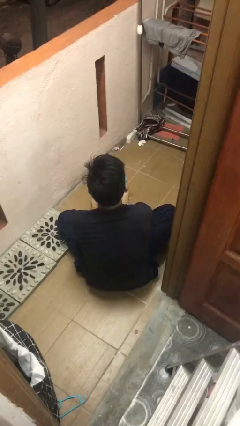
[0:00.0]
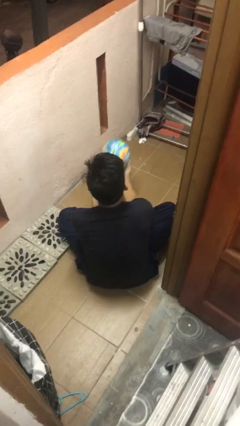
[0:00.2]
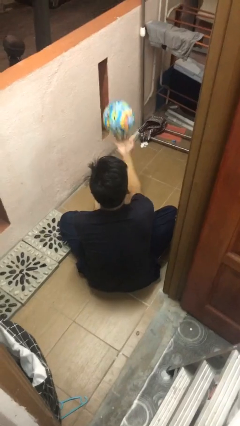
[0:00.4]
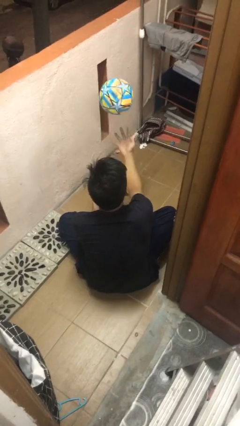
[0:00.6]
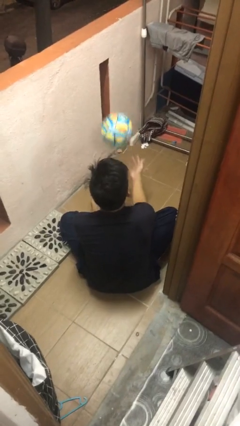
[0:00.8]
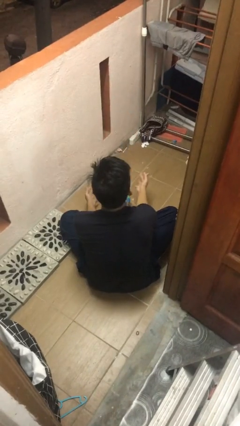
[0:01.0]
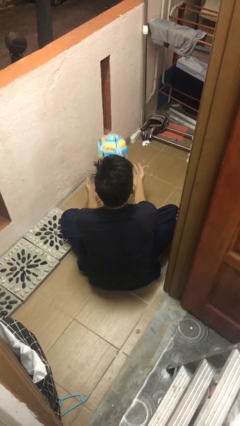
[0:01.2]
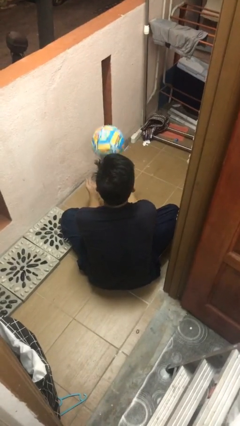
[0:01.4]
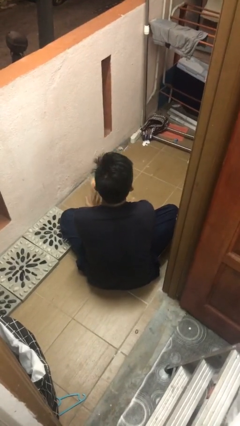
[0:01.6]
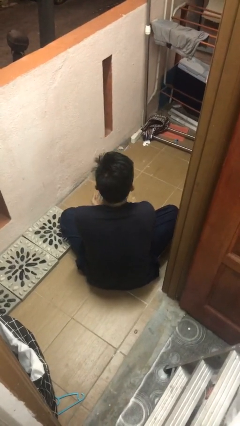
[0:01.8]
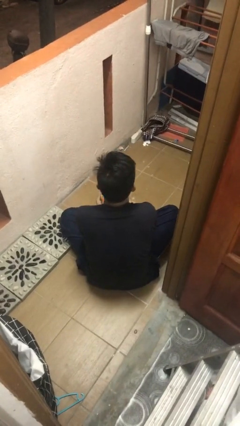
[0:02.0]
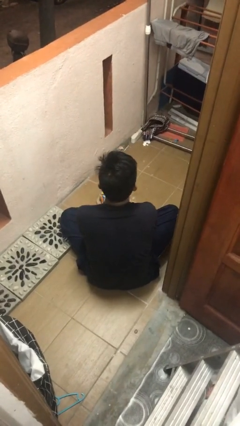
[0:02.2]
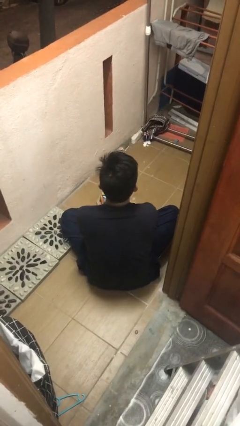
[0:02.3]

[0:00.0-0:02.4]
person bounces ball on floor

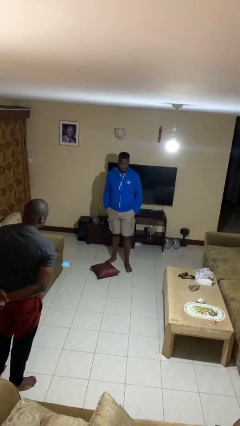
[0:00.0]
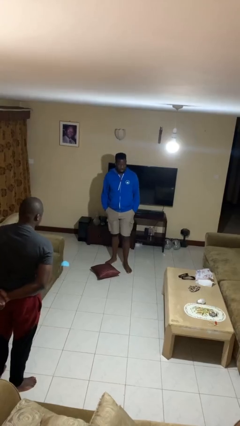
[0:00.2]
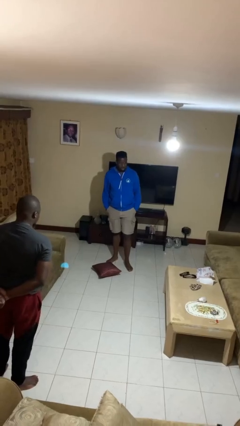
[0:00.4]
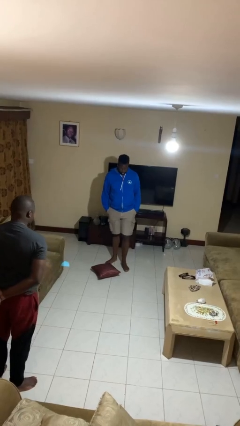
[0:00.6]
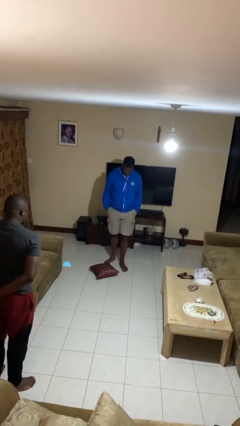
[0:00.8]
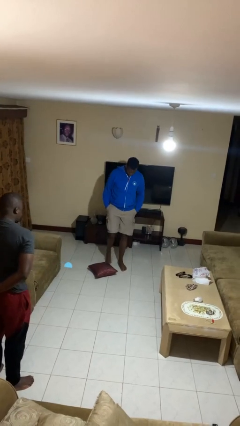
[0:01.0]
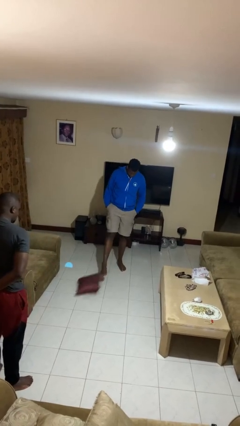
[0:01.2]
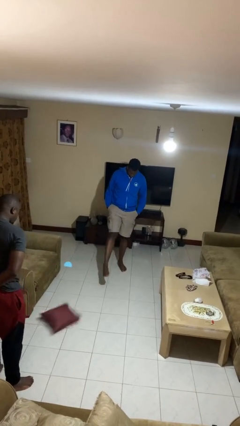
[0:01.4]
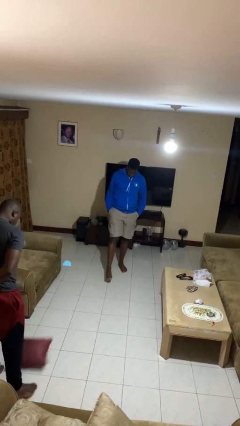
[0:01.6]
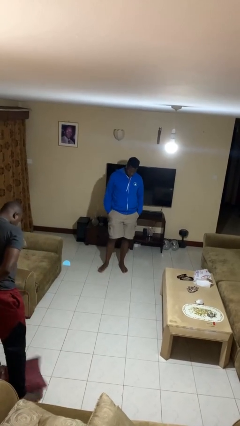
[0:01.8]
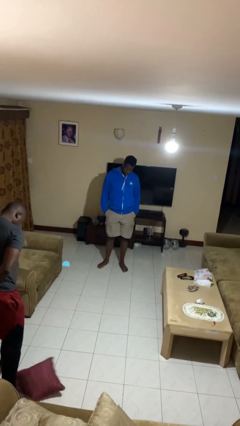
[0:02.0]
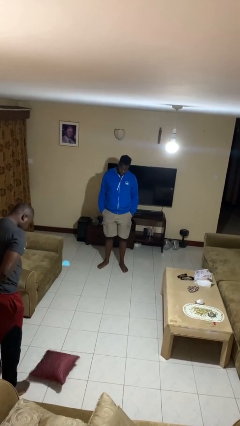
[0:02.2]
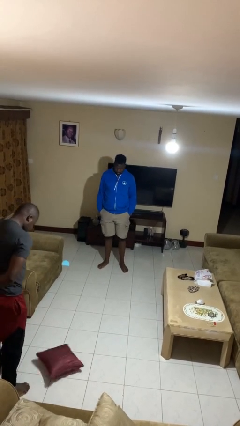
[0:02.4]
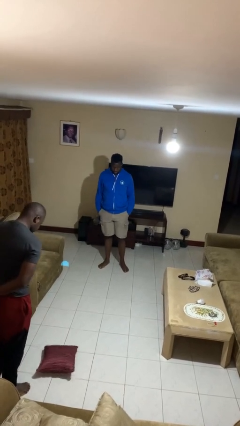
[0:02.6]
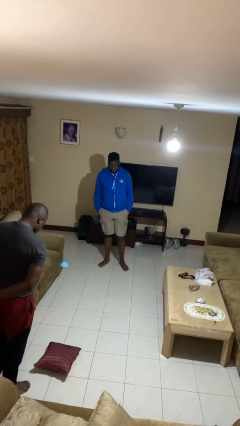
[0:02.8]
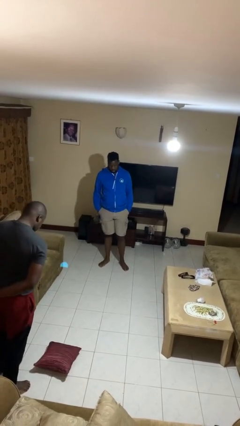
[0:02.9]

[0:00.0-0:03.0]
person kicks object to person

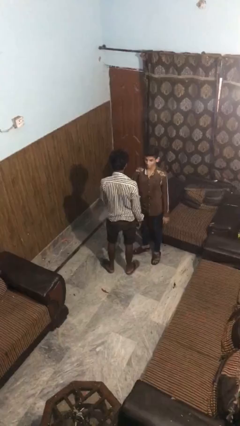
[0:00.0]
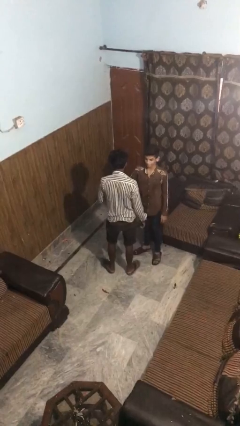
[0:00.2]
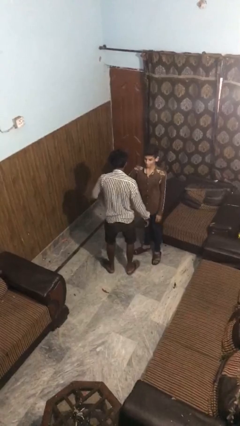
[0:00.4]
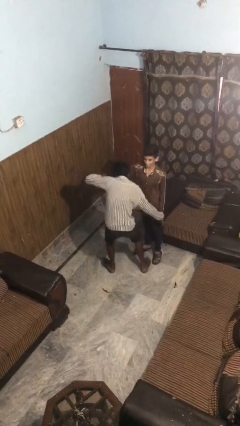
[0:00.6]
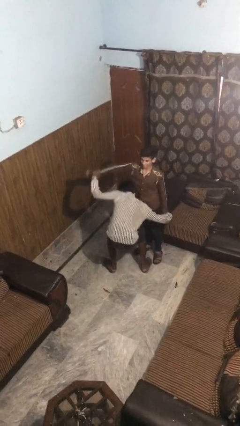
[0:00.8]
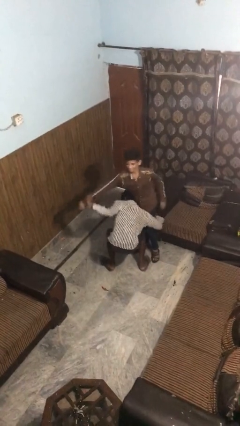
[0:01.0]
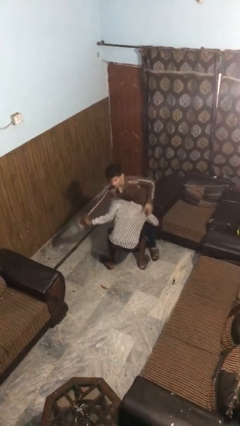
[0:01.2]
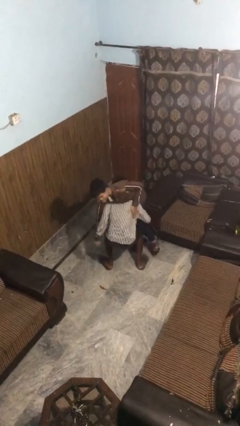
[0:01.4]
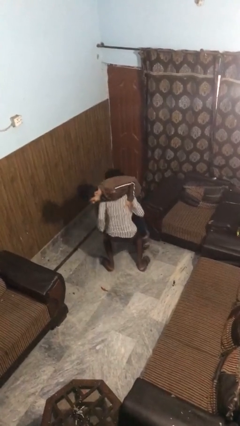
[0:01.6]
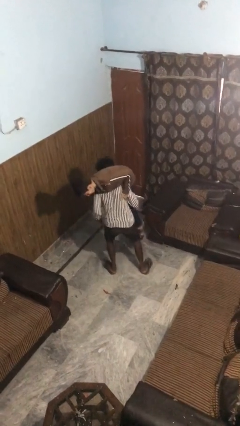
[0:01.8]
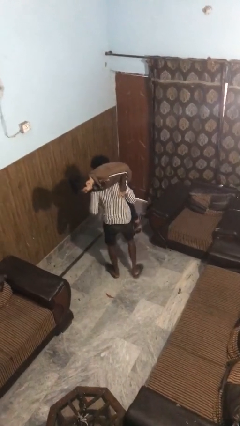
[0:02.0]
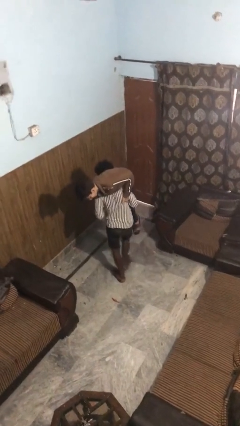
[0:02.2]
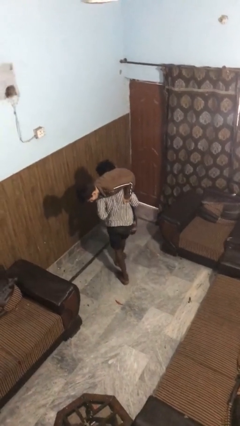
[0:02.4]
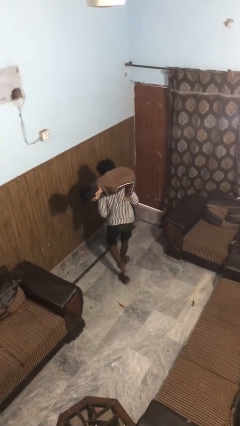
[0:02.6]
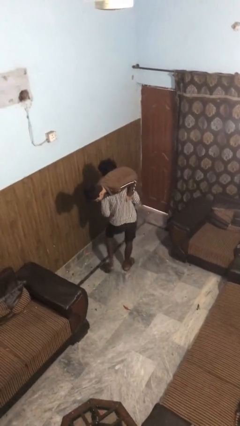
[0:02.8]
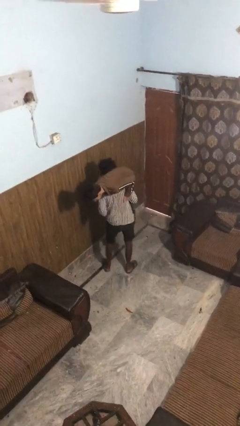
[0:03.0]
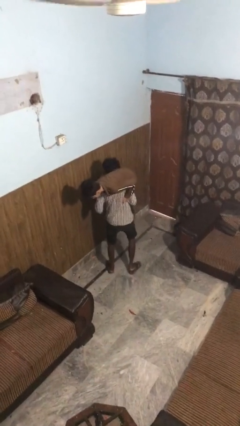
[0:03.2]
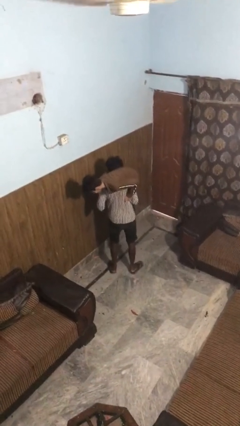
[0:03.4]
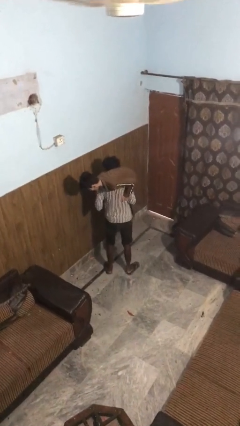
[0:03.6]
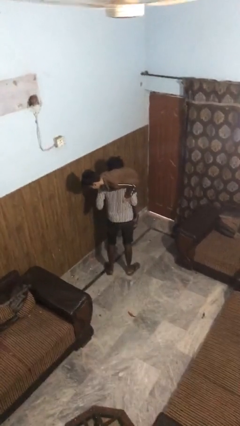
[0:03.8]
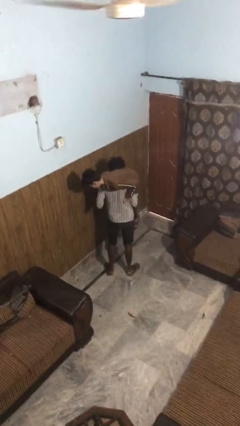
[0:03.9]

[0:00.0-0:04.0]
person carries person on shoulders

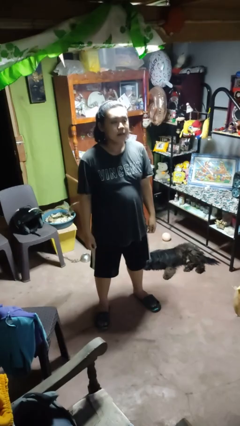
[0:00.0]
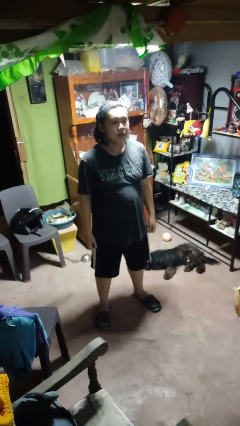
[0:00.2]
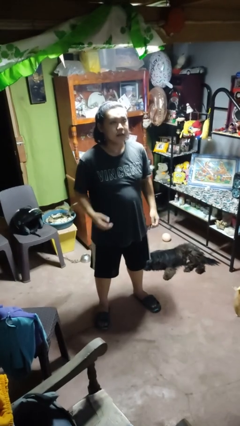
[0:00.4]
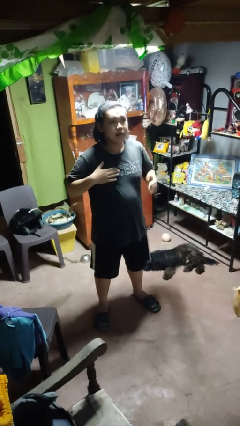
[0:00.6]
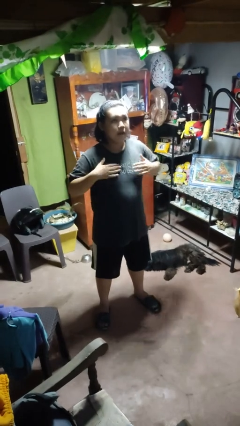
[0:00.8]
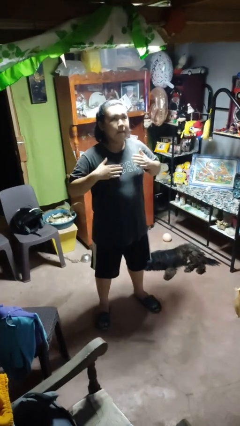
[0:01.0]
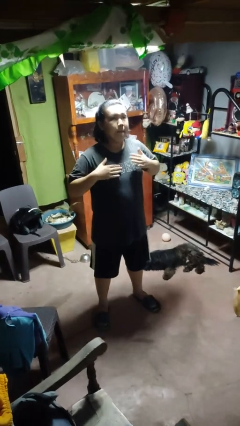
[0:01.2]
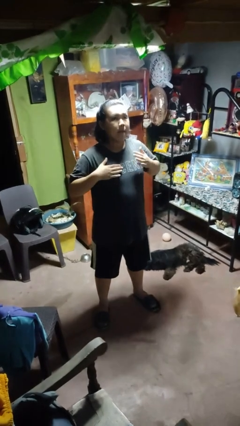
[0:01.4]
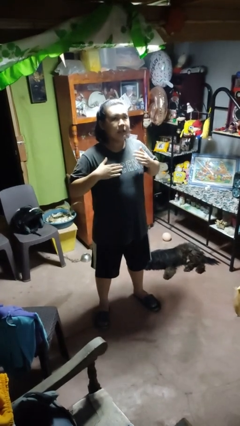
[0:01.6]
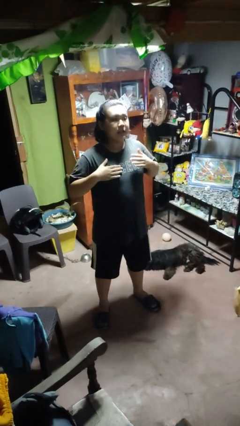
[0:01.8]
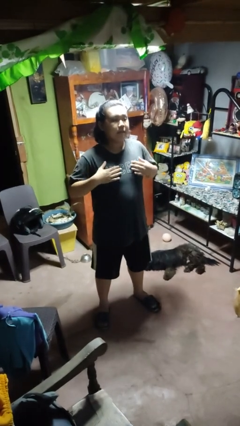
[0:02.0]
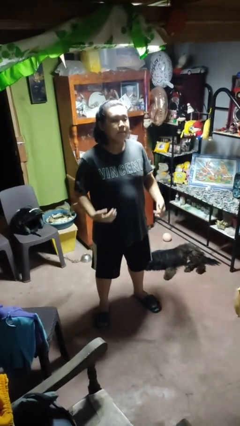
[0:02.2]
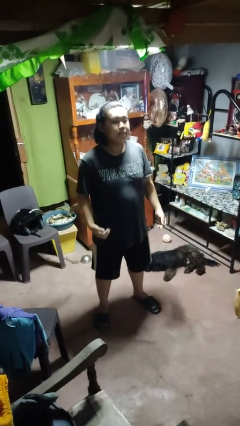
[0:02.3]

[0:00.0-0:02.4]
person drums on chest

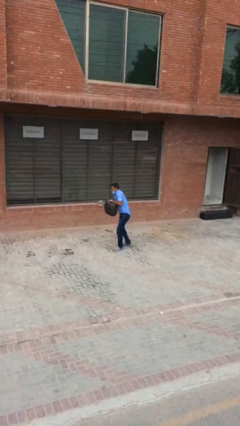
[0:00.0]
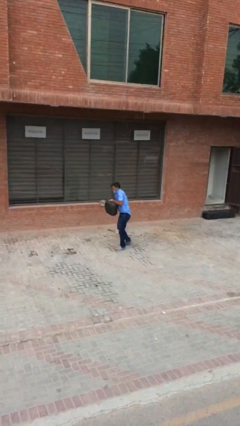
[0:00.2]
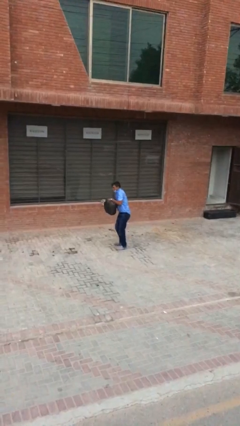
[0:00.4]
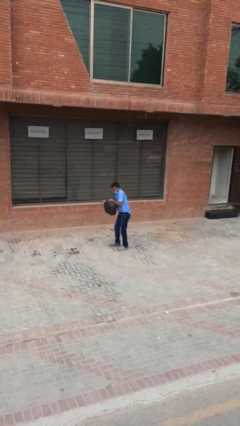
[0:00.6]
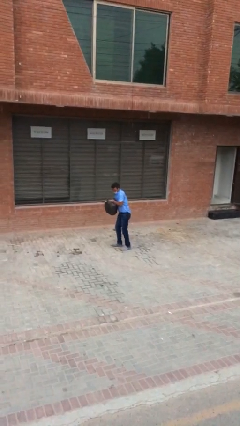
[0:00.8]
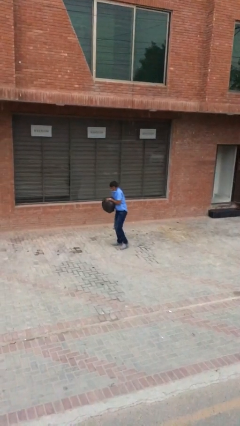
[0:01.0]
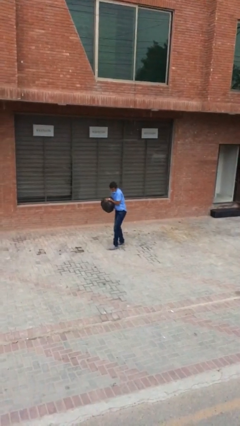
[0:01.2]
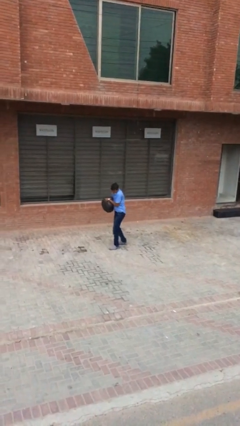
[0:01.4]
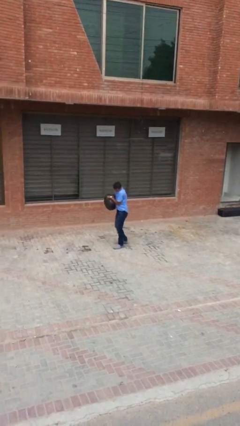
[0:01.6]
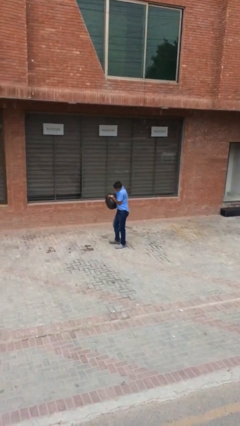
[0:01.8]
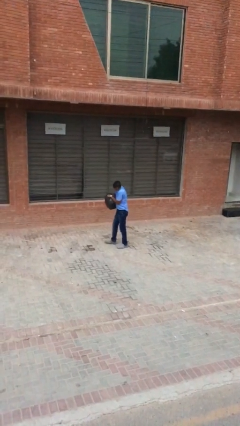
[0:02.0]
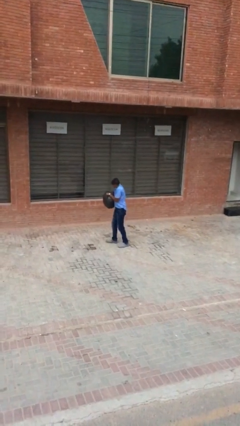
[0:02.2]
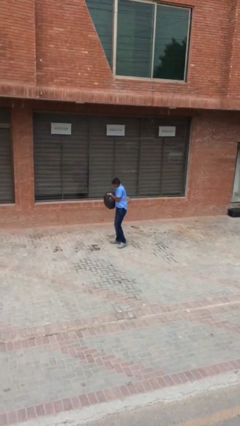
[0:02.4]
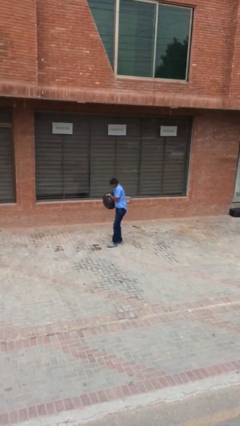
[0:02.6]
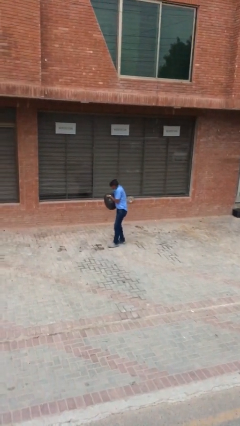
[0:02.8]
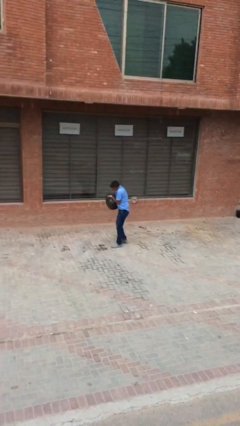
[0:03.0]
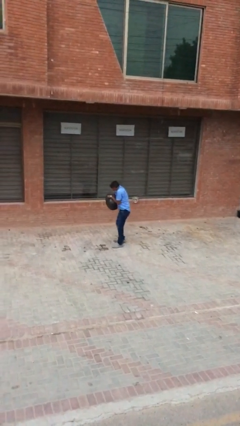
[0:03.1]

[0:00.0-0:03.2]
person carries heavy object

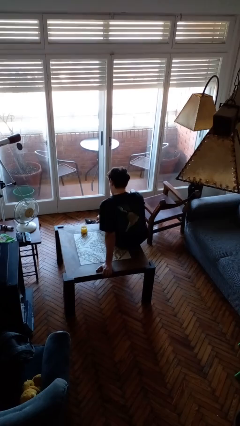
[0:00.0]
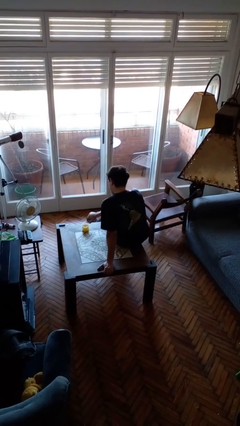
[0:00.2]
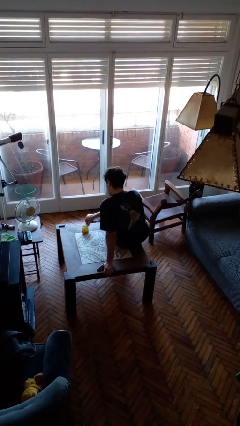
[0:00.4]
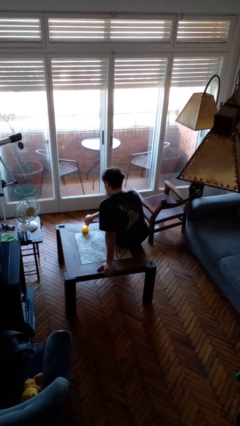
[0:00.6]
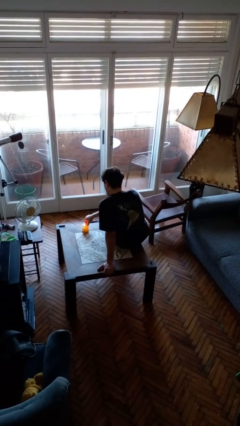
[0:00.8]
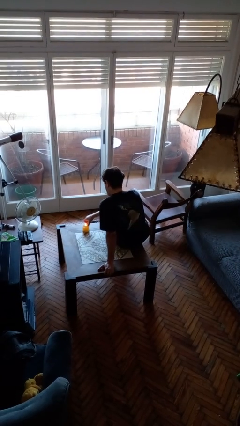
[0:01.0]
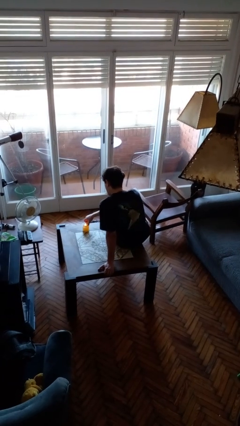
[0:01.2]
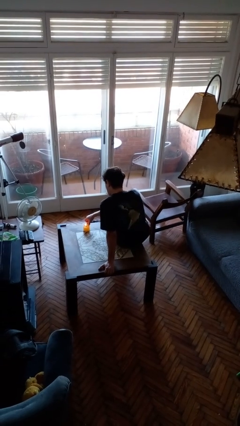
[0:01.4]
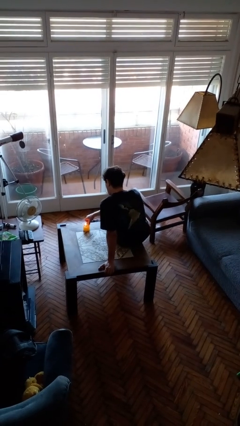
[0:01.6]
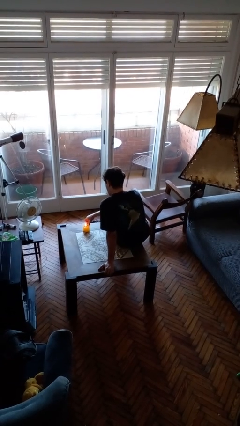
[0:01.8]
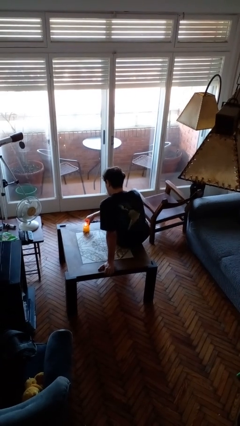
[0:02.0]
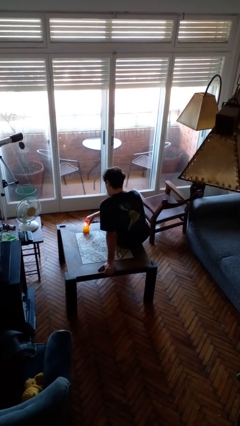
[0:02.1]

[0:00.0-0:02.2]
person lights candle
